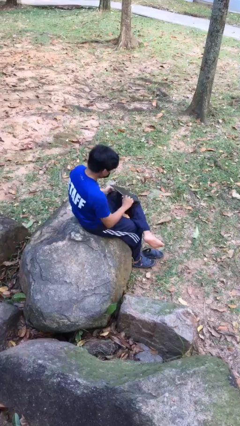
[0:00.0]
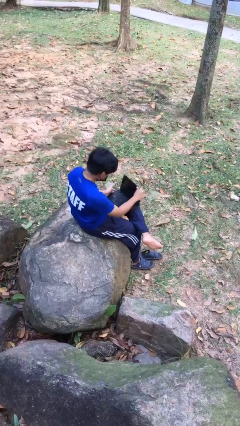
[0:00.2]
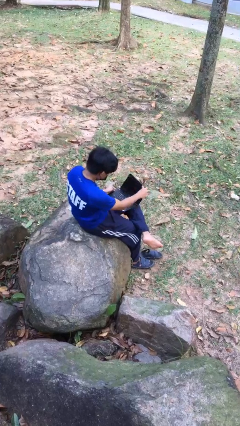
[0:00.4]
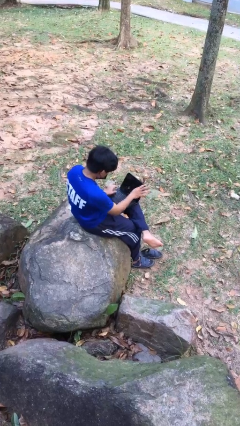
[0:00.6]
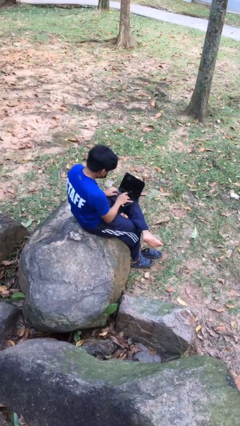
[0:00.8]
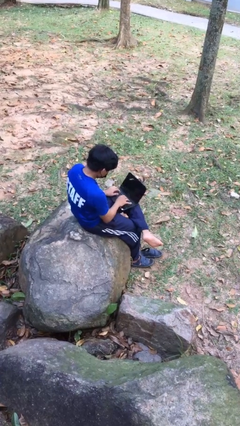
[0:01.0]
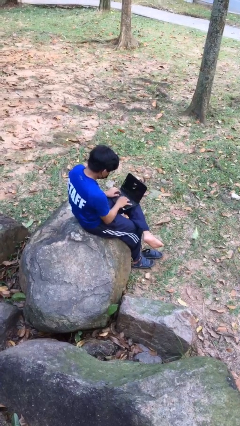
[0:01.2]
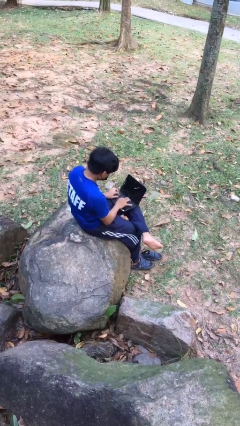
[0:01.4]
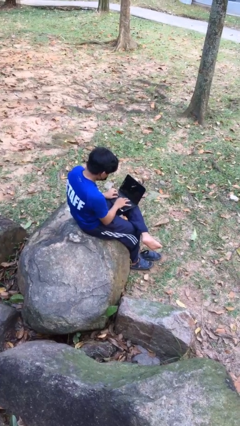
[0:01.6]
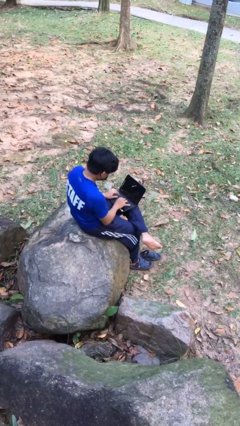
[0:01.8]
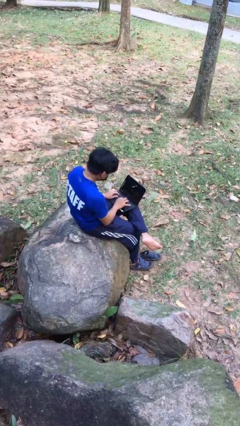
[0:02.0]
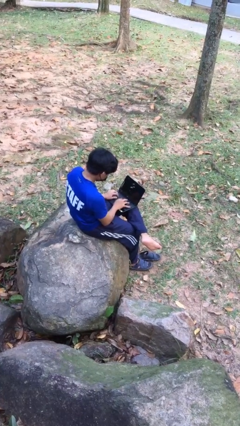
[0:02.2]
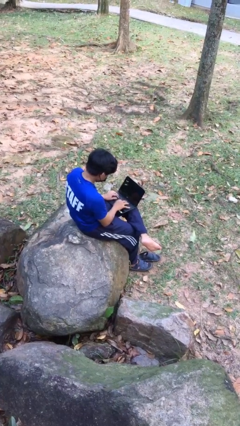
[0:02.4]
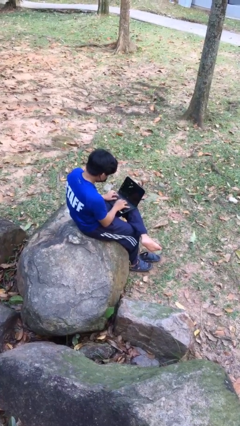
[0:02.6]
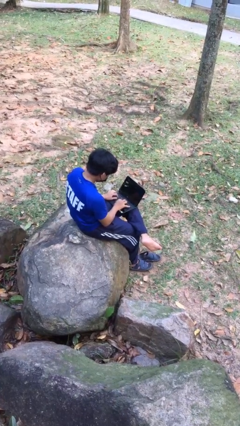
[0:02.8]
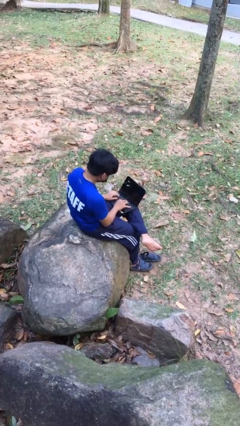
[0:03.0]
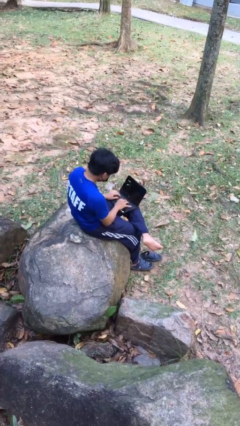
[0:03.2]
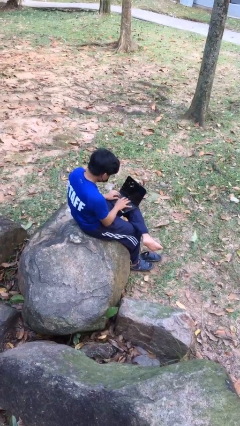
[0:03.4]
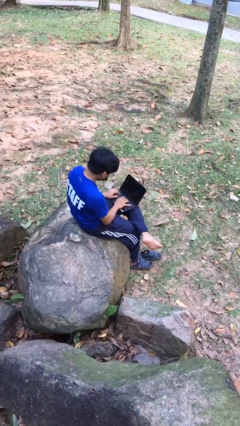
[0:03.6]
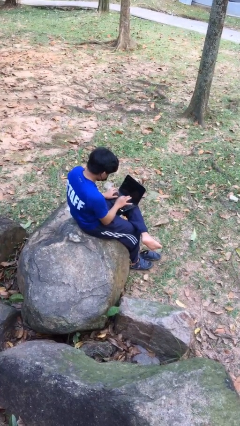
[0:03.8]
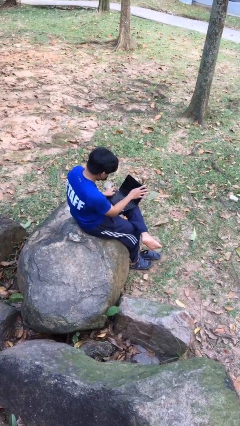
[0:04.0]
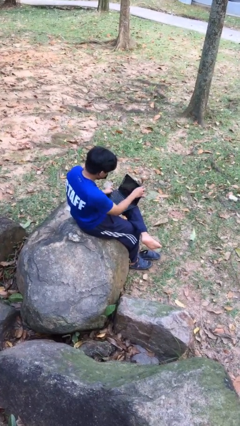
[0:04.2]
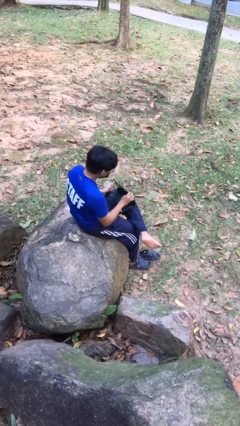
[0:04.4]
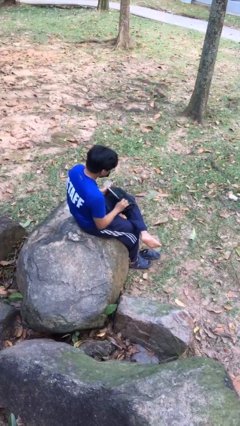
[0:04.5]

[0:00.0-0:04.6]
person interacts with laptop

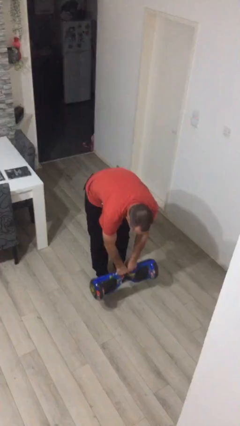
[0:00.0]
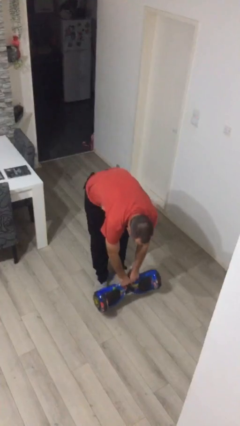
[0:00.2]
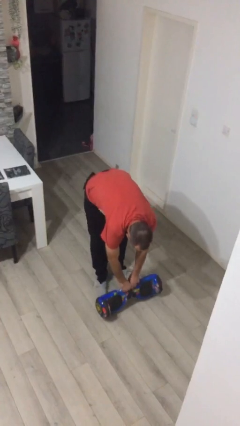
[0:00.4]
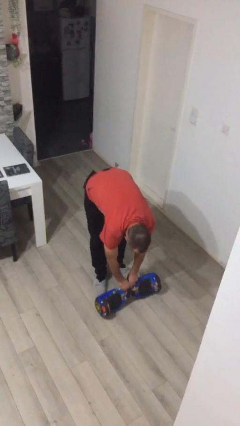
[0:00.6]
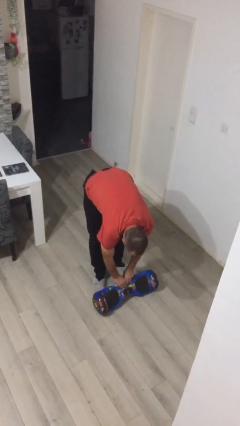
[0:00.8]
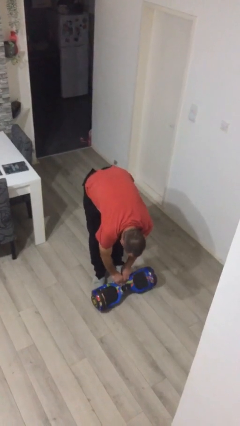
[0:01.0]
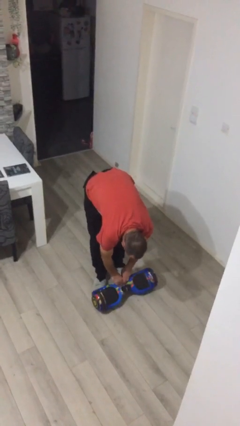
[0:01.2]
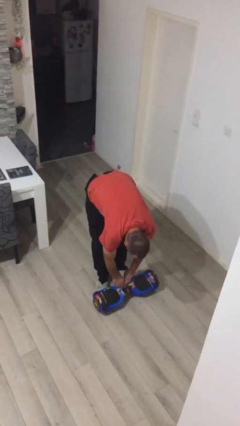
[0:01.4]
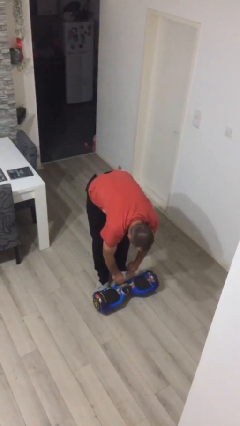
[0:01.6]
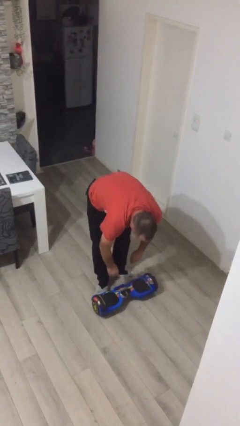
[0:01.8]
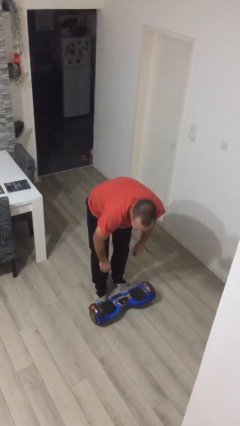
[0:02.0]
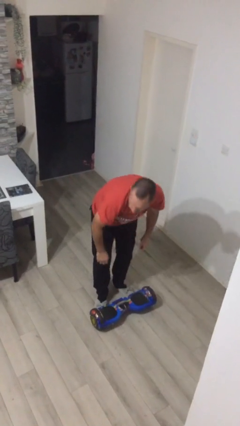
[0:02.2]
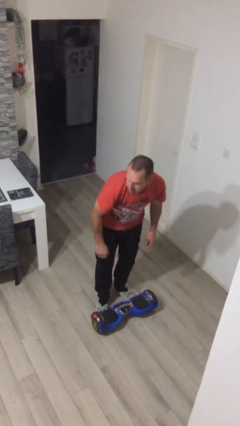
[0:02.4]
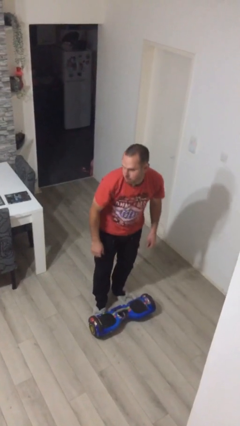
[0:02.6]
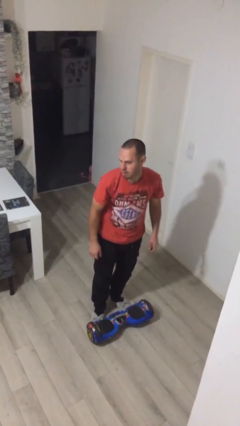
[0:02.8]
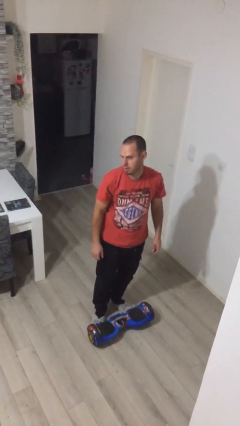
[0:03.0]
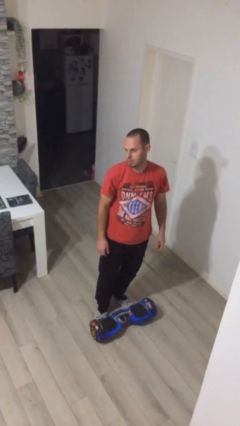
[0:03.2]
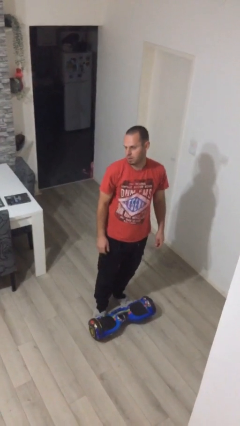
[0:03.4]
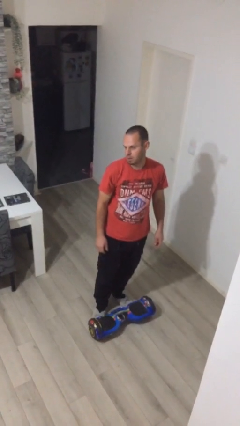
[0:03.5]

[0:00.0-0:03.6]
person puts down object on floor

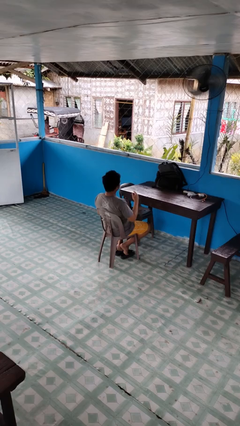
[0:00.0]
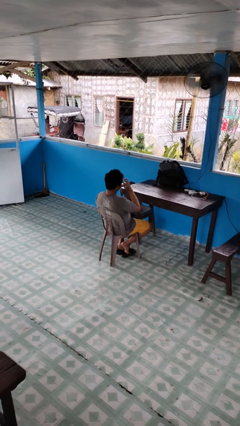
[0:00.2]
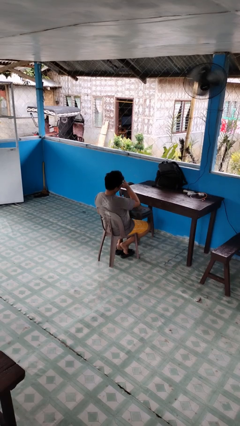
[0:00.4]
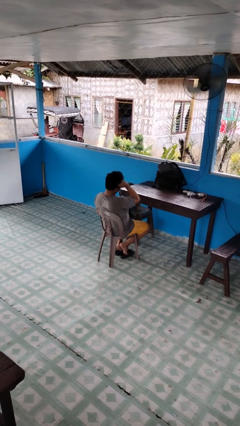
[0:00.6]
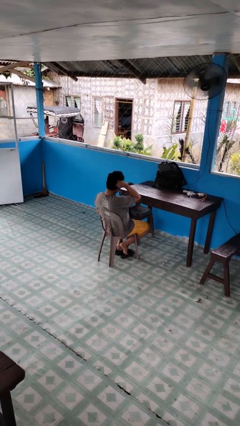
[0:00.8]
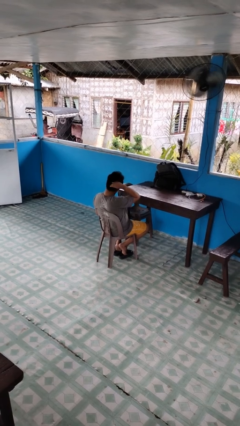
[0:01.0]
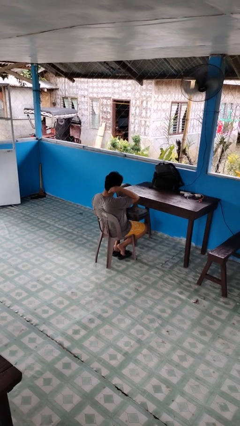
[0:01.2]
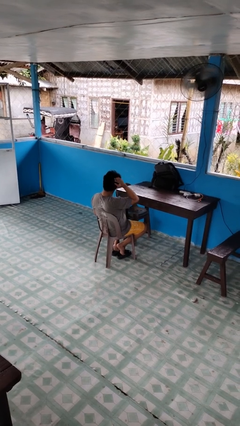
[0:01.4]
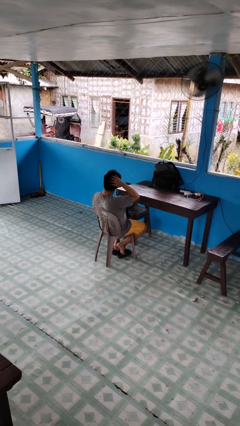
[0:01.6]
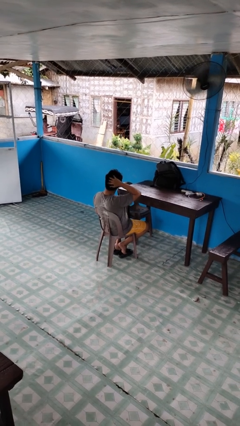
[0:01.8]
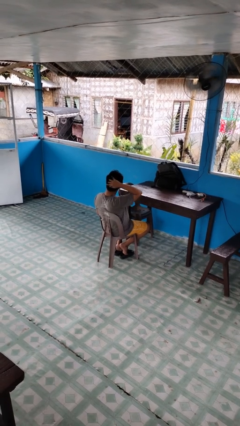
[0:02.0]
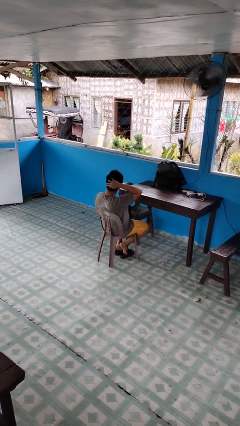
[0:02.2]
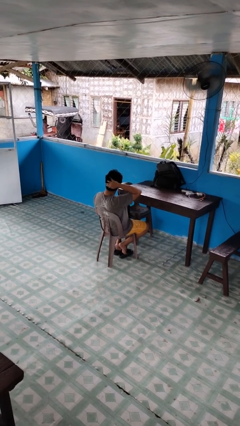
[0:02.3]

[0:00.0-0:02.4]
person strokes hair

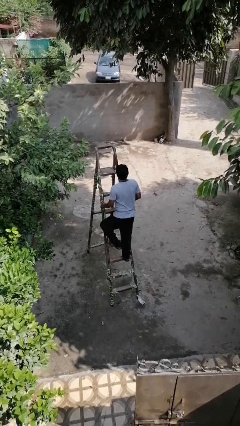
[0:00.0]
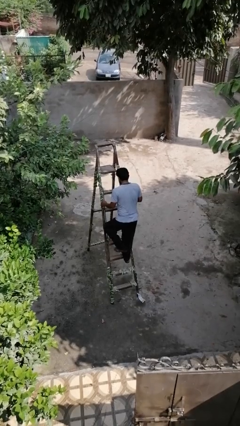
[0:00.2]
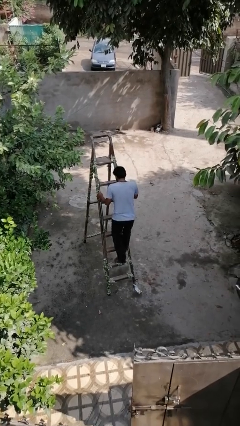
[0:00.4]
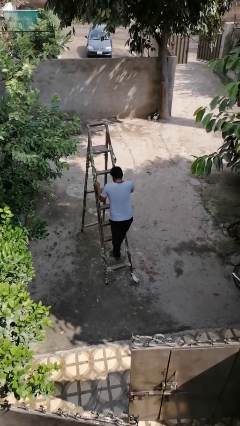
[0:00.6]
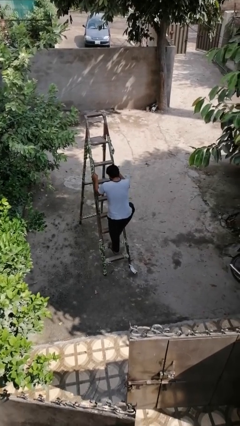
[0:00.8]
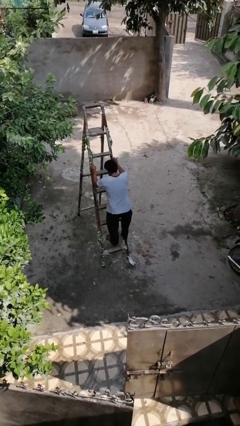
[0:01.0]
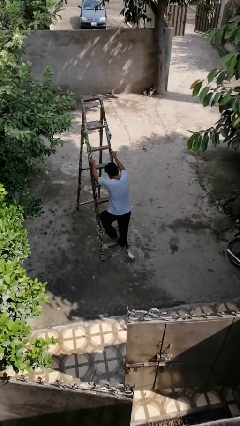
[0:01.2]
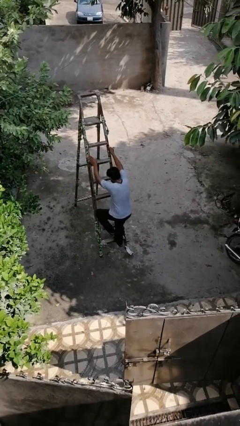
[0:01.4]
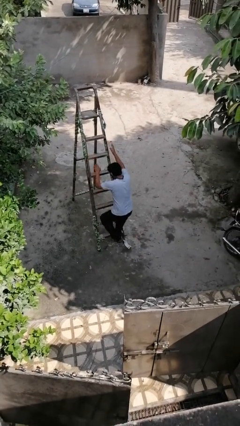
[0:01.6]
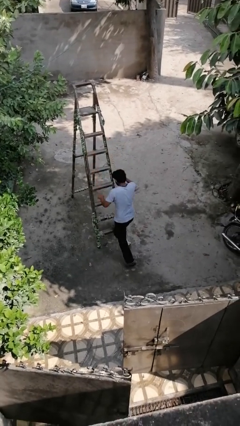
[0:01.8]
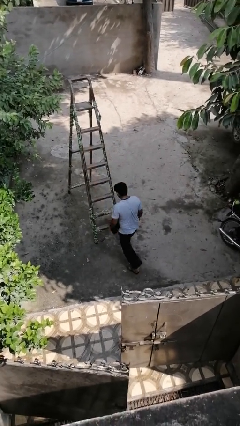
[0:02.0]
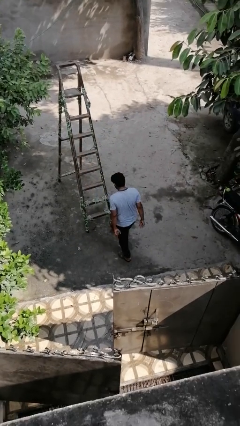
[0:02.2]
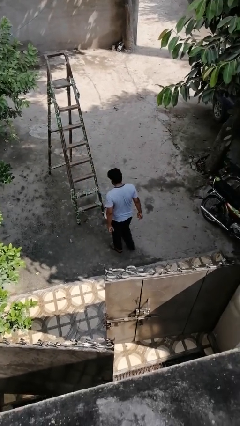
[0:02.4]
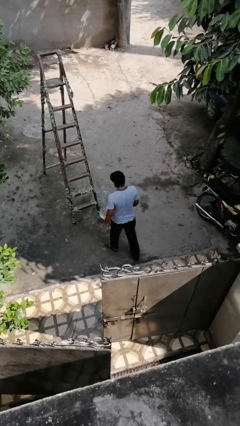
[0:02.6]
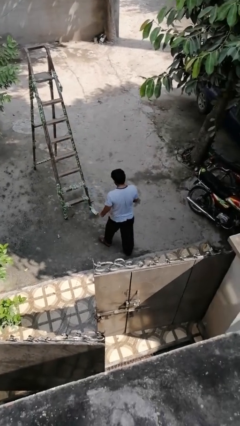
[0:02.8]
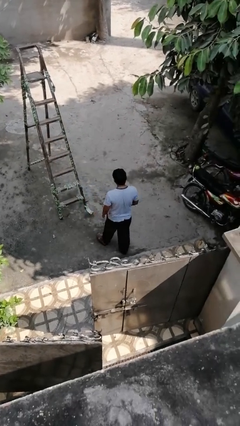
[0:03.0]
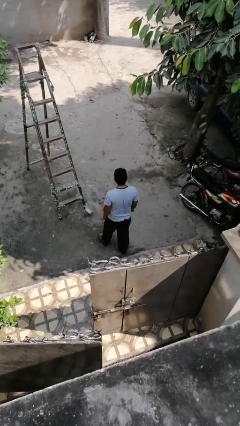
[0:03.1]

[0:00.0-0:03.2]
person climbs down ladder

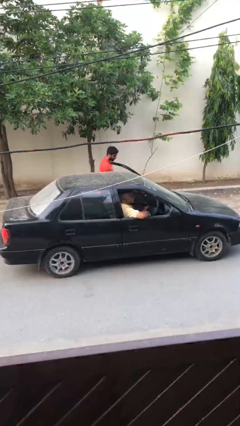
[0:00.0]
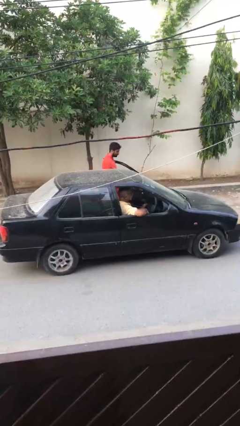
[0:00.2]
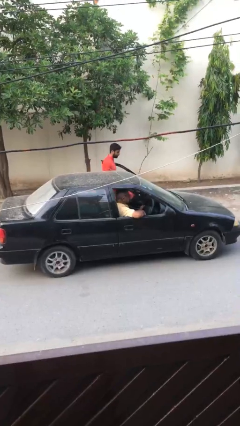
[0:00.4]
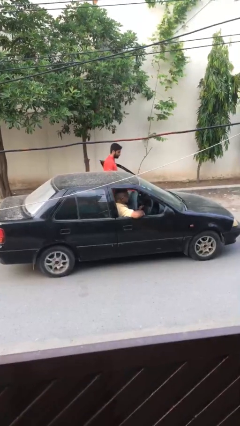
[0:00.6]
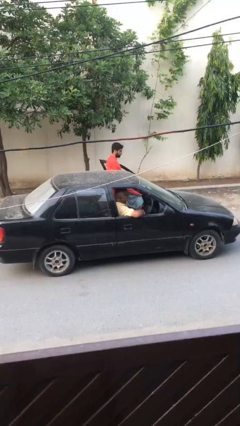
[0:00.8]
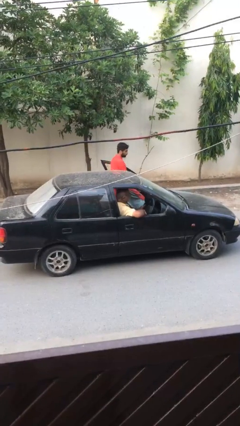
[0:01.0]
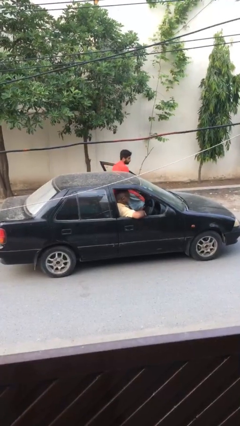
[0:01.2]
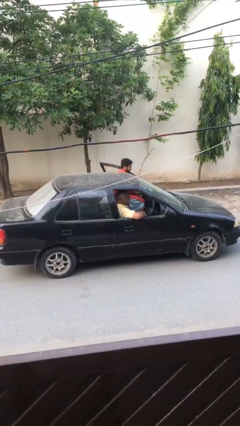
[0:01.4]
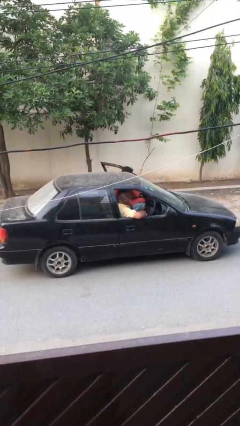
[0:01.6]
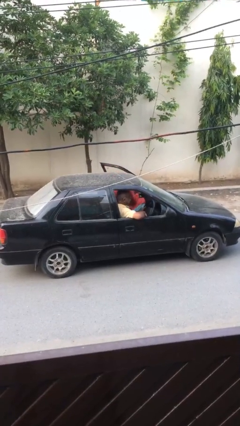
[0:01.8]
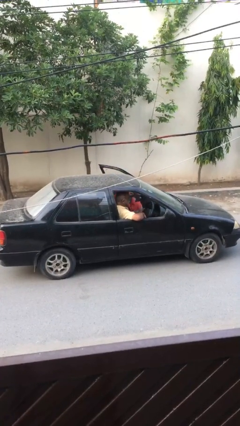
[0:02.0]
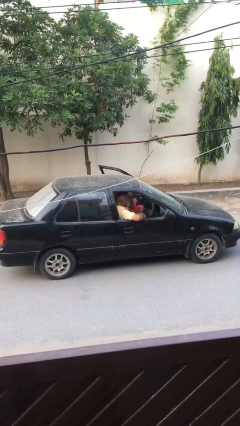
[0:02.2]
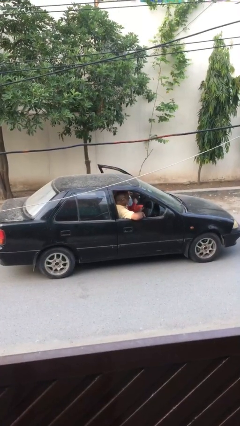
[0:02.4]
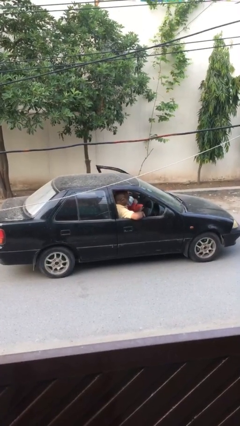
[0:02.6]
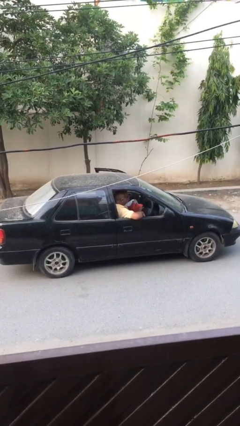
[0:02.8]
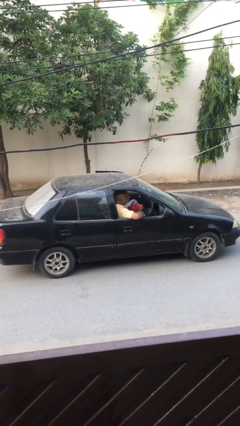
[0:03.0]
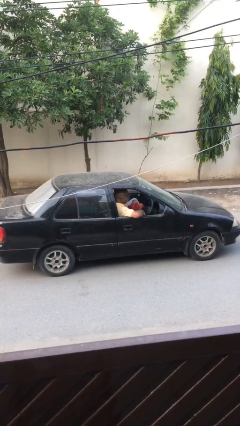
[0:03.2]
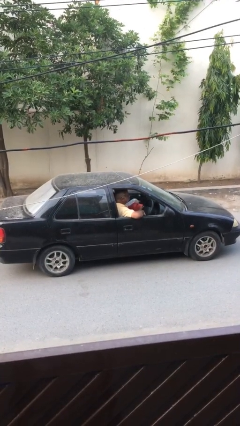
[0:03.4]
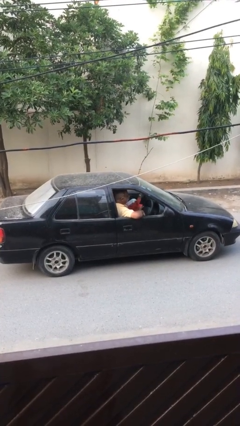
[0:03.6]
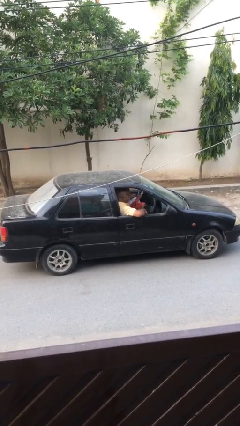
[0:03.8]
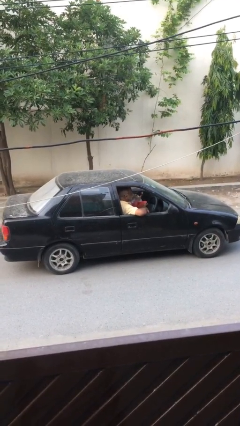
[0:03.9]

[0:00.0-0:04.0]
car picks up person

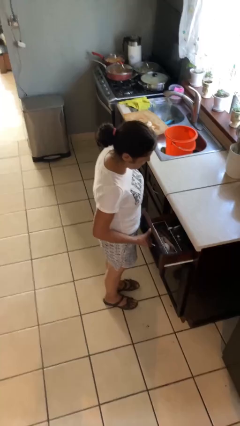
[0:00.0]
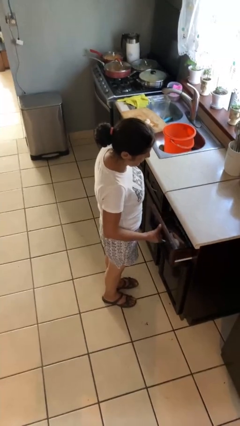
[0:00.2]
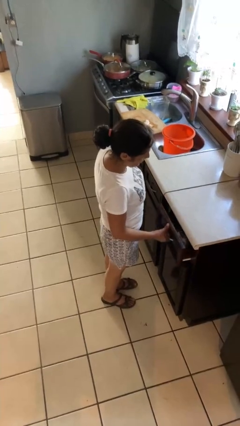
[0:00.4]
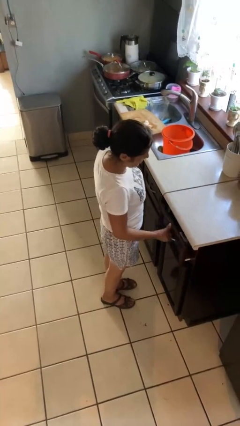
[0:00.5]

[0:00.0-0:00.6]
person closes kitchen drawer
